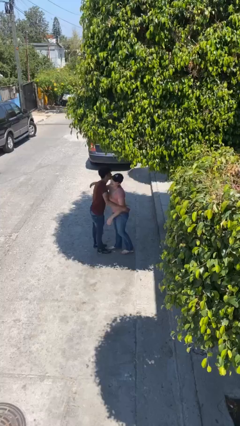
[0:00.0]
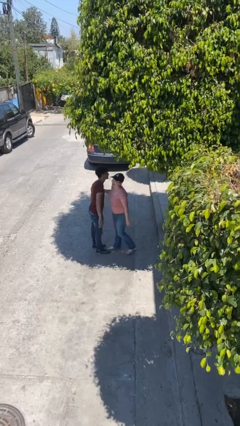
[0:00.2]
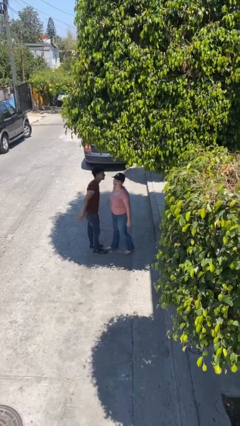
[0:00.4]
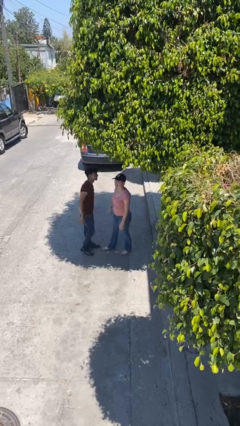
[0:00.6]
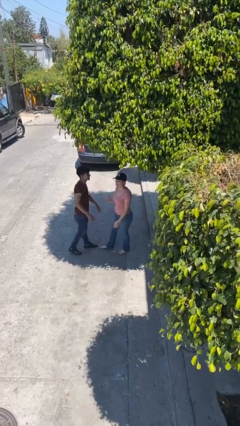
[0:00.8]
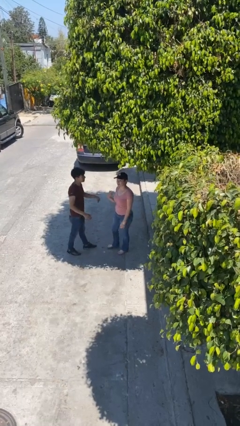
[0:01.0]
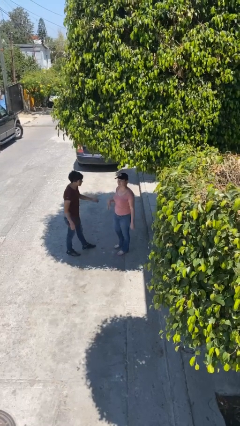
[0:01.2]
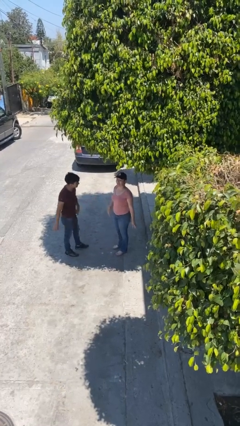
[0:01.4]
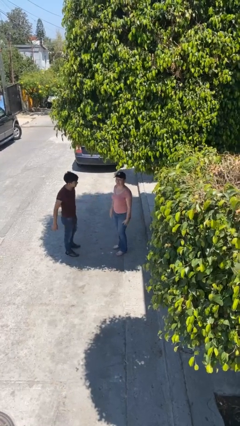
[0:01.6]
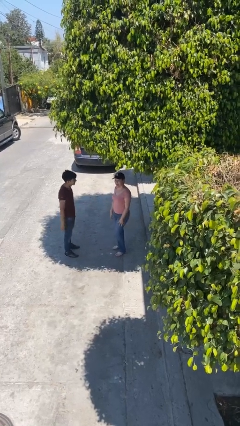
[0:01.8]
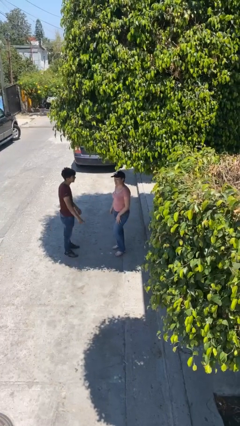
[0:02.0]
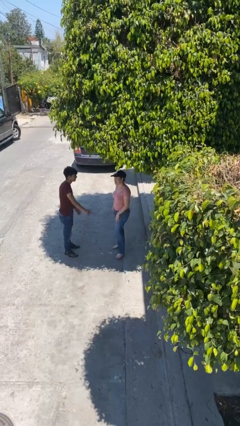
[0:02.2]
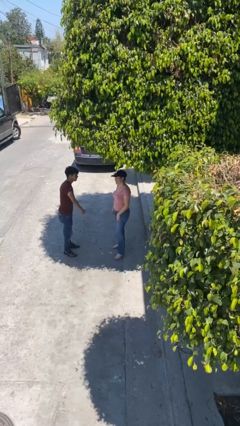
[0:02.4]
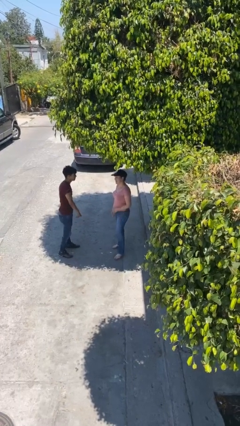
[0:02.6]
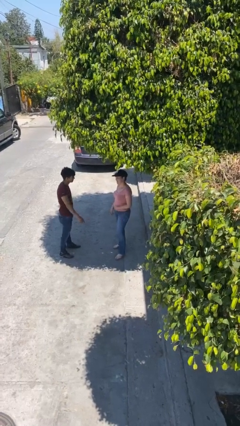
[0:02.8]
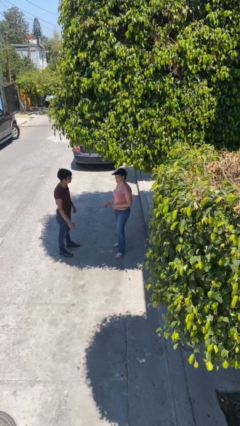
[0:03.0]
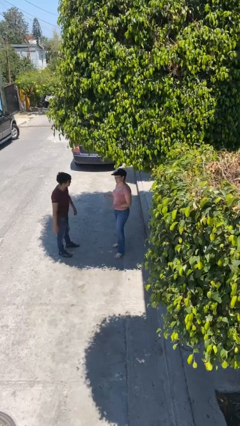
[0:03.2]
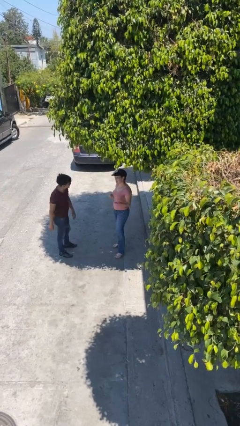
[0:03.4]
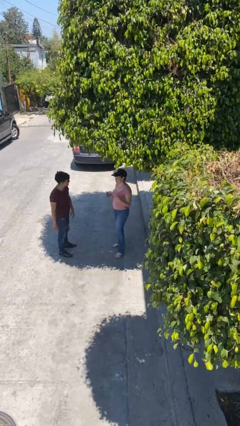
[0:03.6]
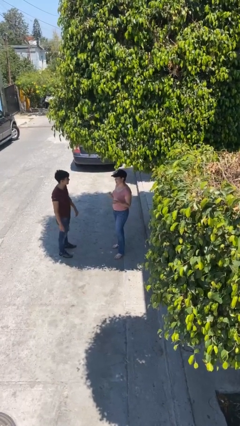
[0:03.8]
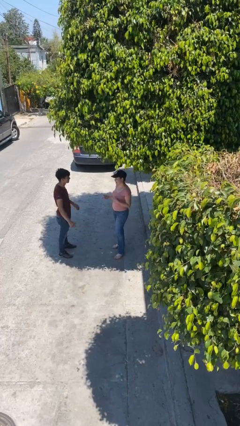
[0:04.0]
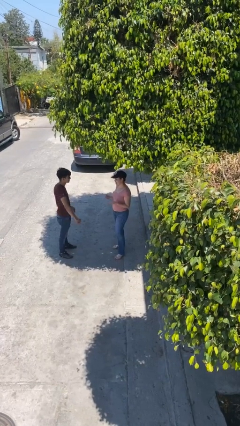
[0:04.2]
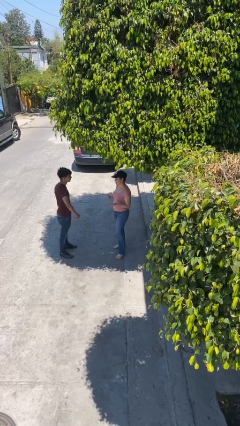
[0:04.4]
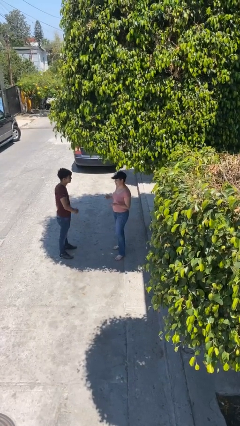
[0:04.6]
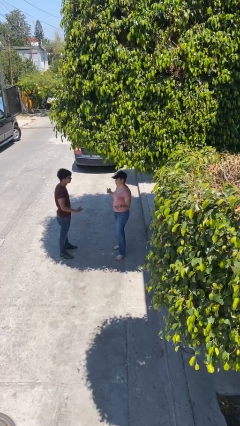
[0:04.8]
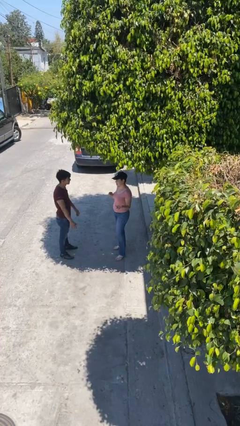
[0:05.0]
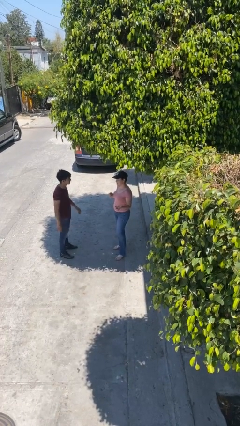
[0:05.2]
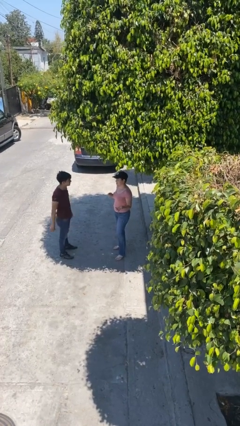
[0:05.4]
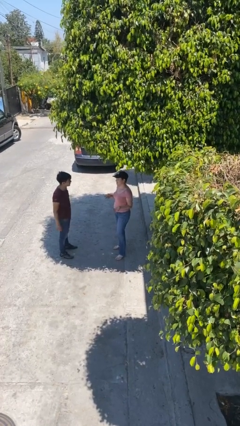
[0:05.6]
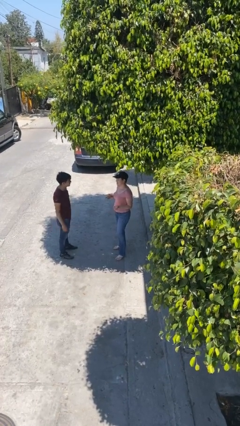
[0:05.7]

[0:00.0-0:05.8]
person talks to person

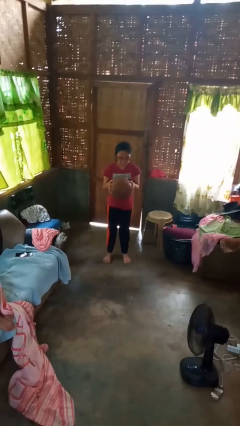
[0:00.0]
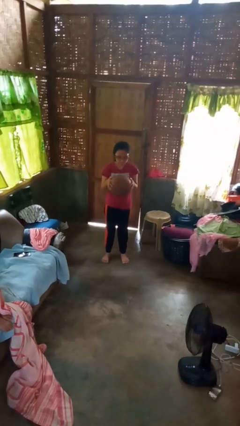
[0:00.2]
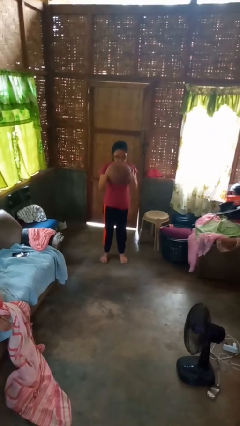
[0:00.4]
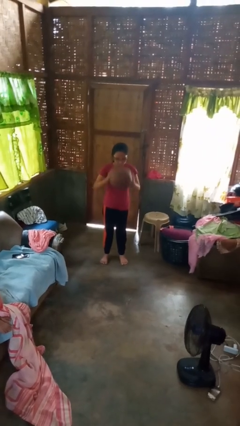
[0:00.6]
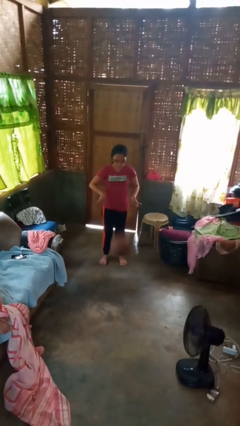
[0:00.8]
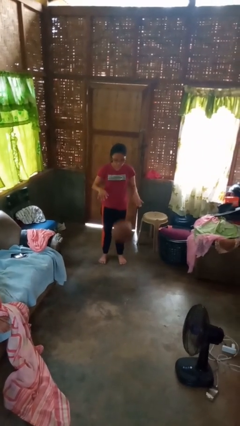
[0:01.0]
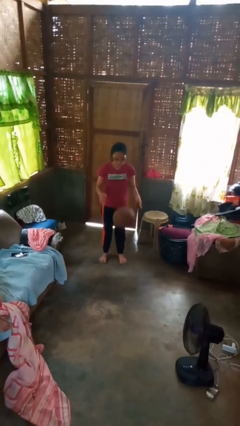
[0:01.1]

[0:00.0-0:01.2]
person bounces ball on floor

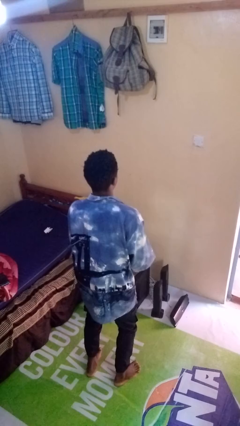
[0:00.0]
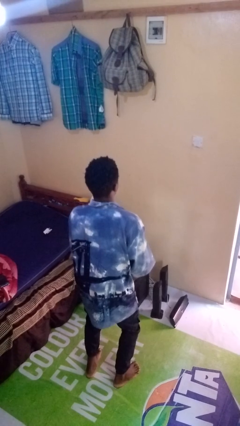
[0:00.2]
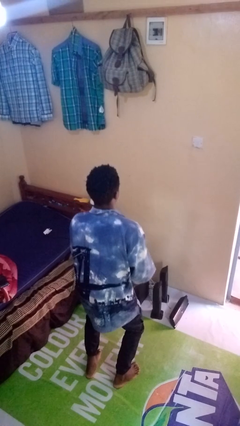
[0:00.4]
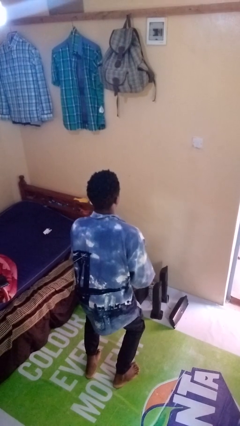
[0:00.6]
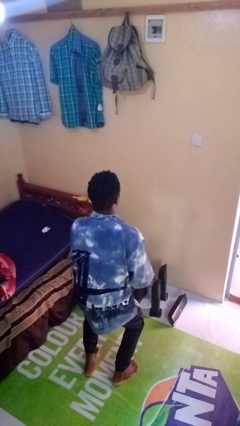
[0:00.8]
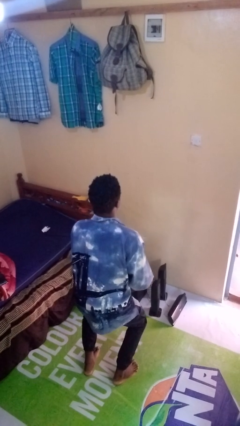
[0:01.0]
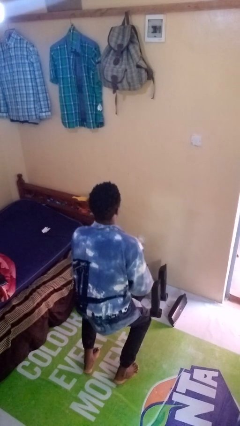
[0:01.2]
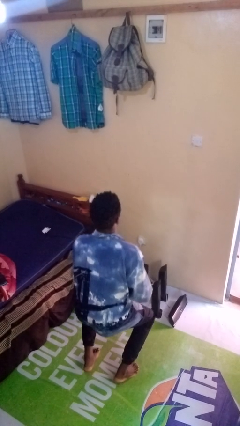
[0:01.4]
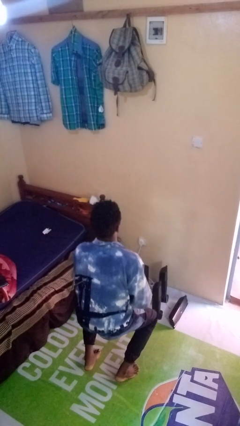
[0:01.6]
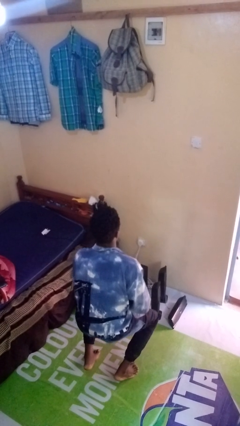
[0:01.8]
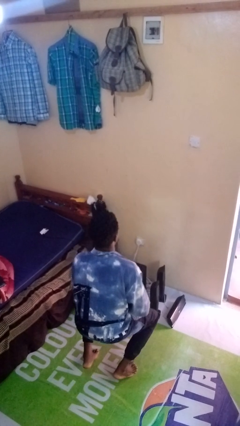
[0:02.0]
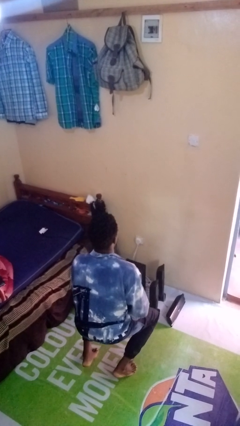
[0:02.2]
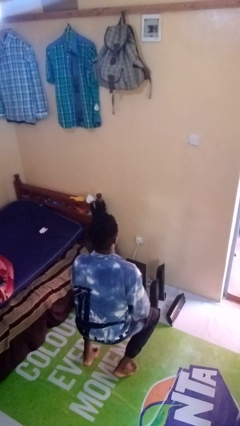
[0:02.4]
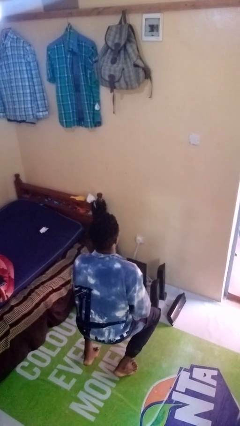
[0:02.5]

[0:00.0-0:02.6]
person squats

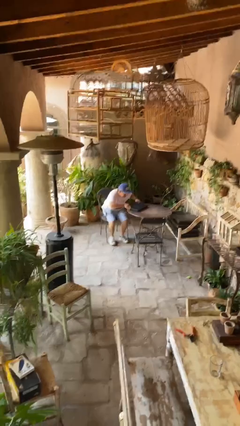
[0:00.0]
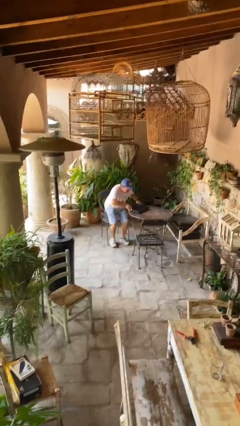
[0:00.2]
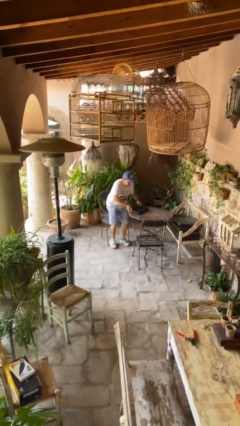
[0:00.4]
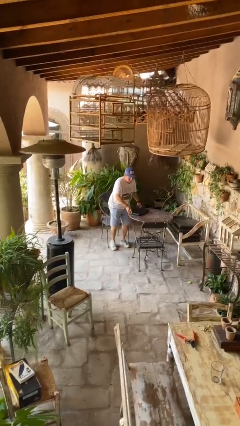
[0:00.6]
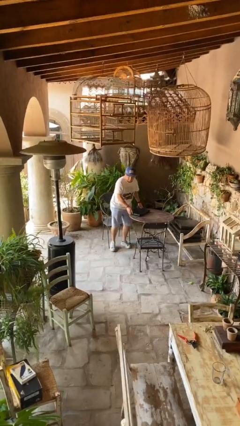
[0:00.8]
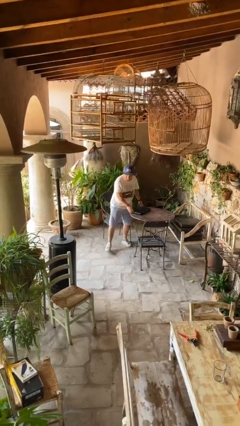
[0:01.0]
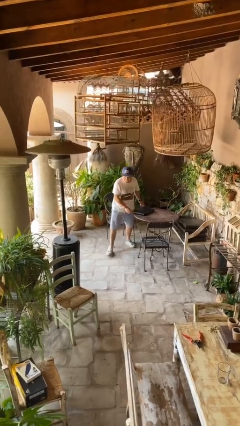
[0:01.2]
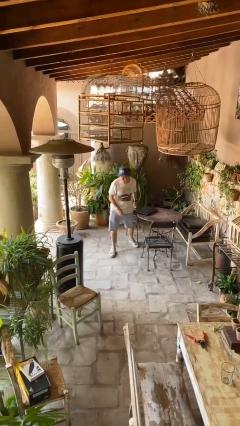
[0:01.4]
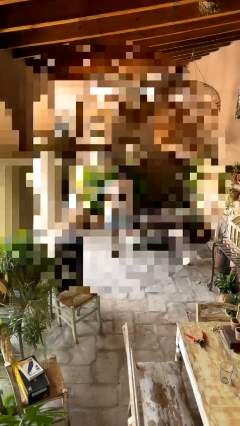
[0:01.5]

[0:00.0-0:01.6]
person stands up

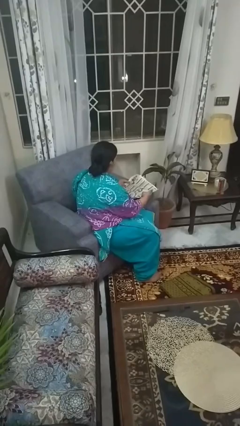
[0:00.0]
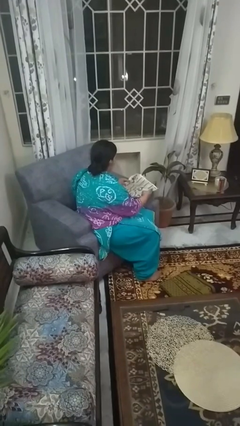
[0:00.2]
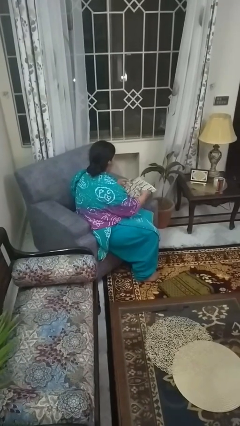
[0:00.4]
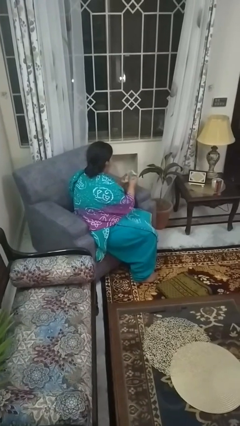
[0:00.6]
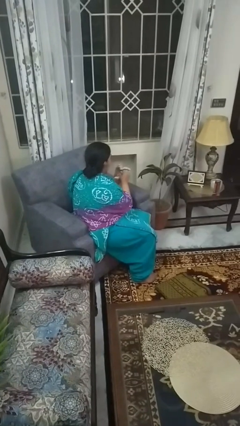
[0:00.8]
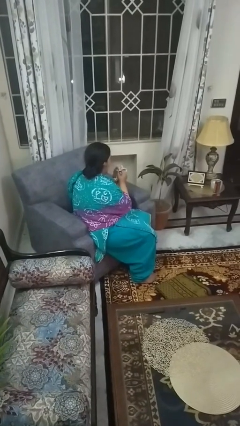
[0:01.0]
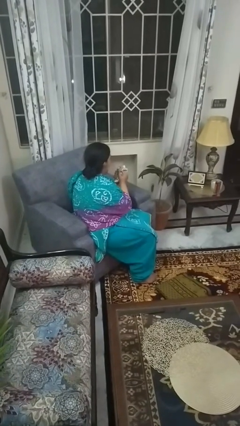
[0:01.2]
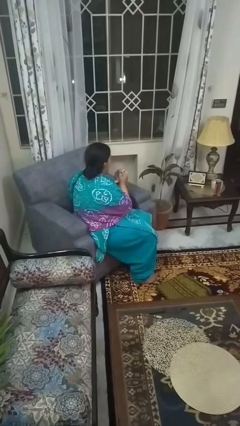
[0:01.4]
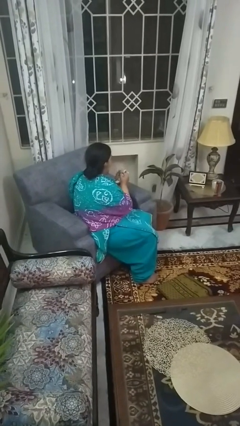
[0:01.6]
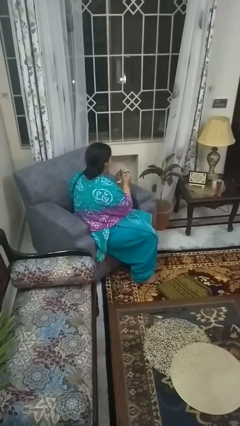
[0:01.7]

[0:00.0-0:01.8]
person crumples paper

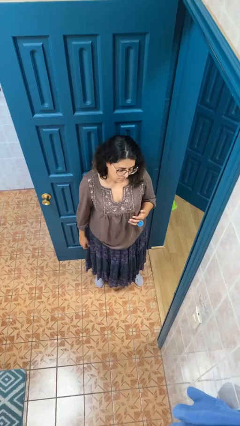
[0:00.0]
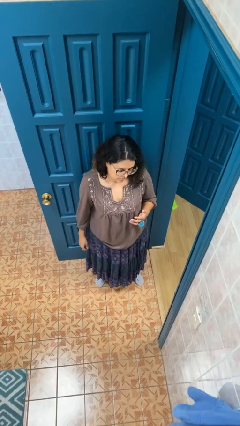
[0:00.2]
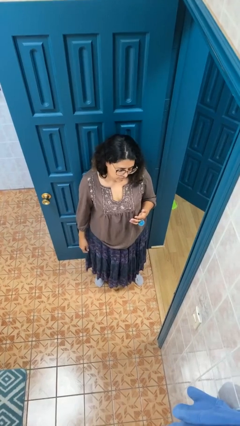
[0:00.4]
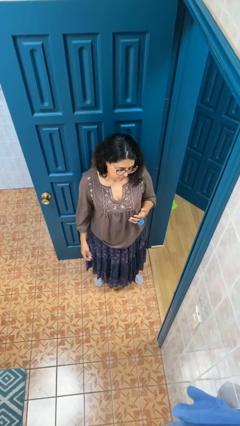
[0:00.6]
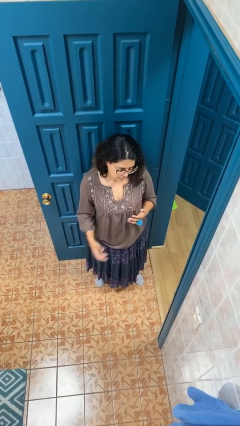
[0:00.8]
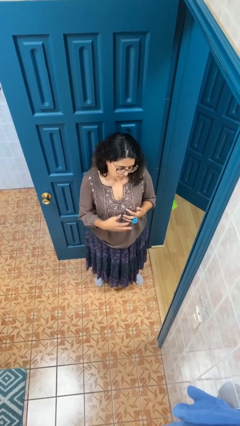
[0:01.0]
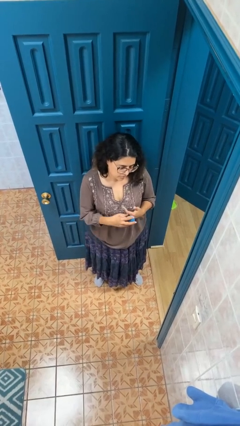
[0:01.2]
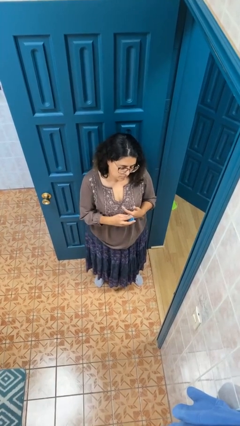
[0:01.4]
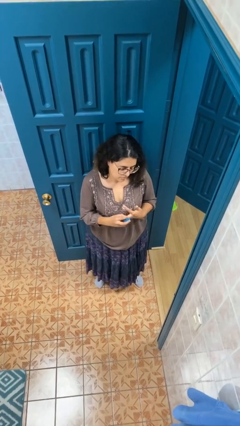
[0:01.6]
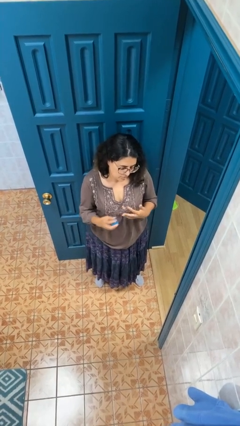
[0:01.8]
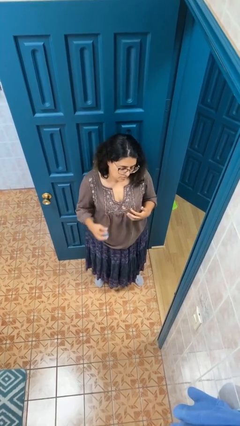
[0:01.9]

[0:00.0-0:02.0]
person takes off ring

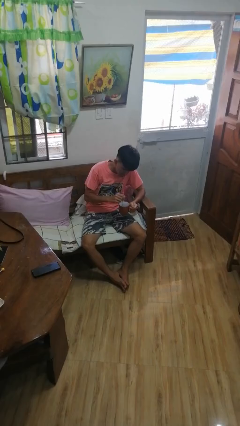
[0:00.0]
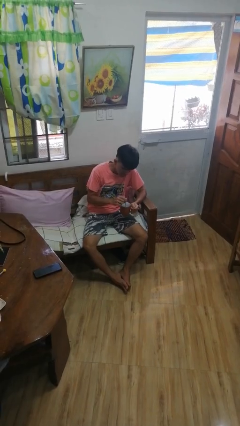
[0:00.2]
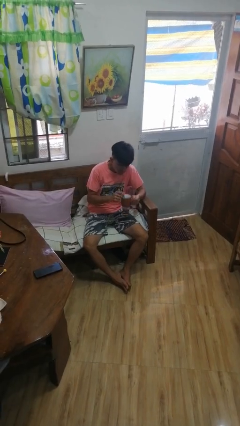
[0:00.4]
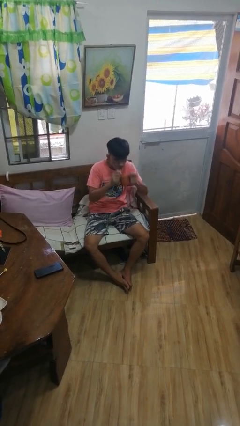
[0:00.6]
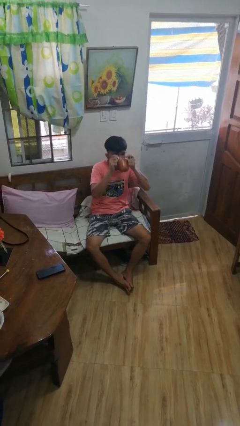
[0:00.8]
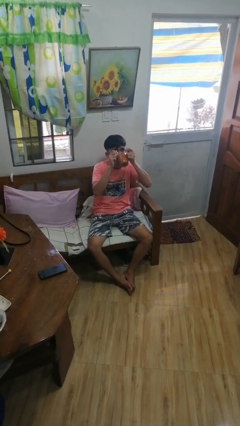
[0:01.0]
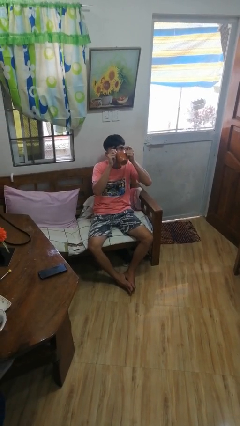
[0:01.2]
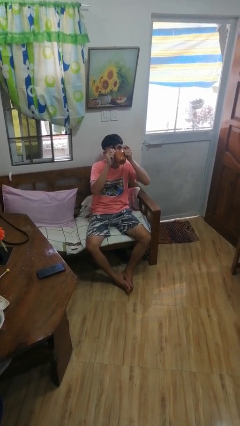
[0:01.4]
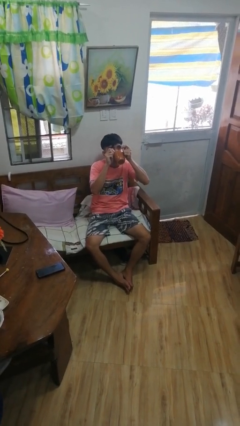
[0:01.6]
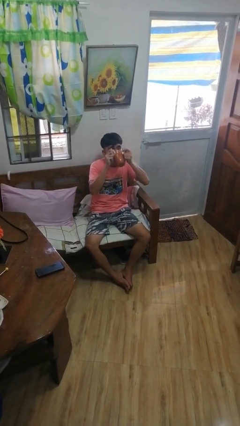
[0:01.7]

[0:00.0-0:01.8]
person drinks from mug

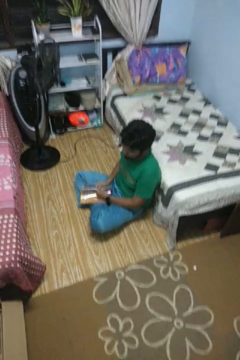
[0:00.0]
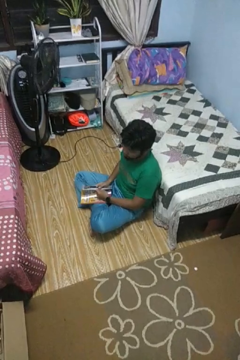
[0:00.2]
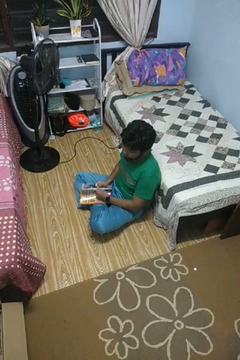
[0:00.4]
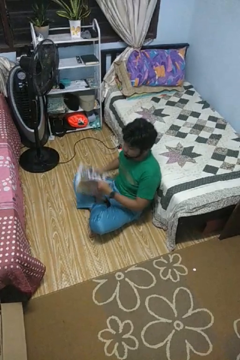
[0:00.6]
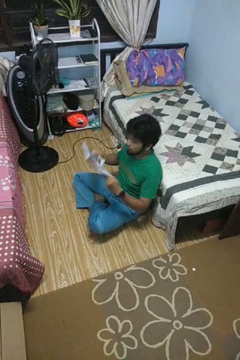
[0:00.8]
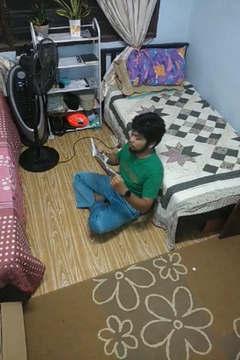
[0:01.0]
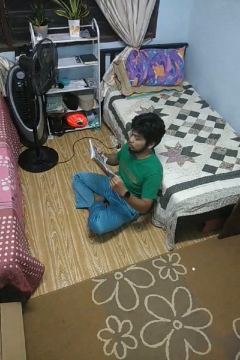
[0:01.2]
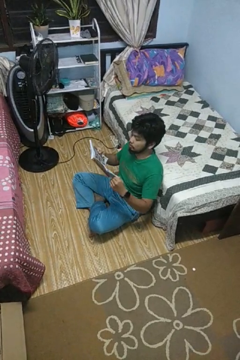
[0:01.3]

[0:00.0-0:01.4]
person reads magazine
